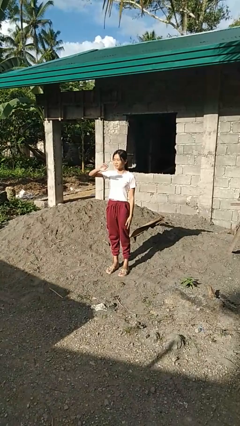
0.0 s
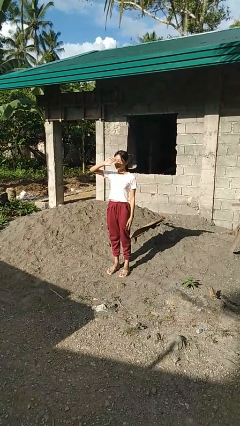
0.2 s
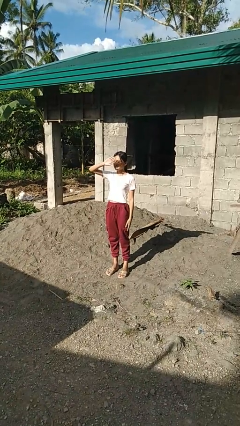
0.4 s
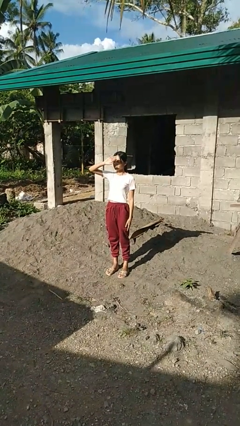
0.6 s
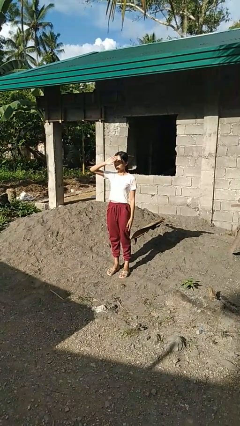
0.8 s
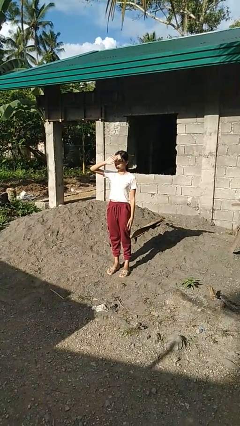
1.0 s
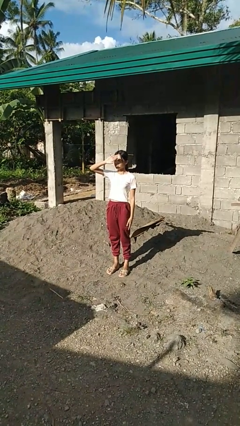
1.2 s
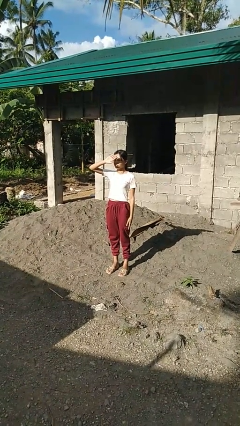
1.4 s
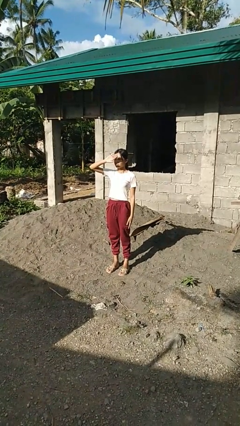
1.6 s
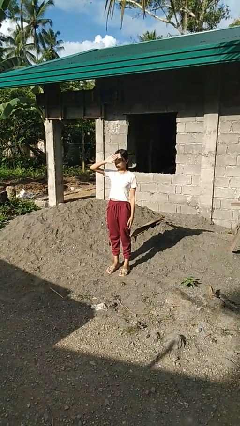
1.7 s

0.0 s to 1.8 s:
person shades eyes

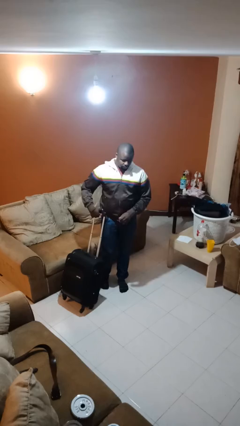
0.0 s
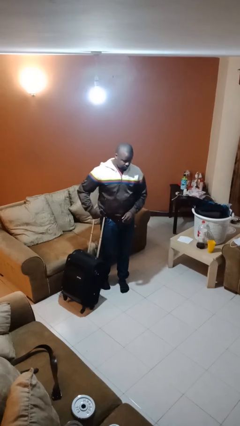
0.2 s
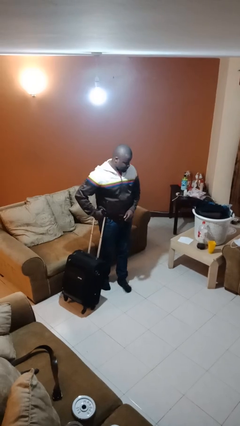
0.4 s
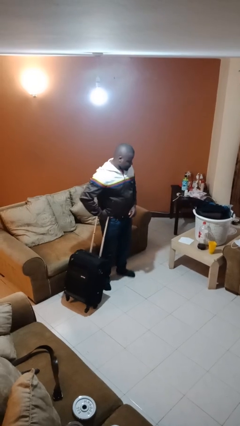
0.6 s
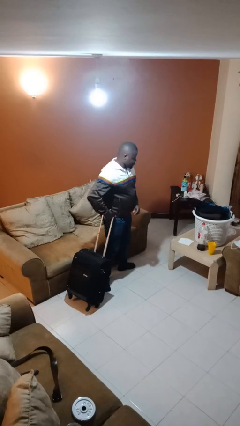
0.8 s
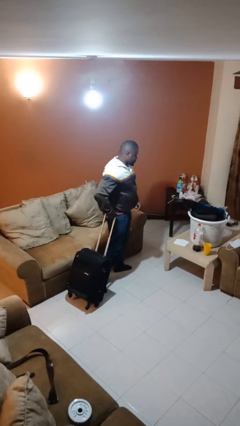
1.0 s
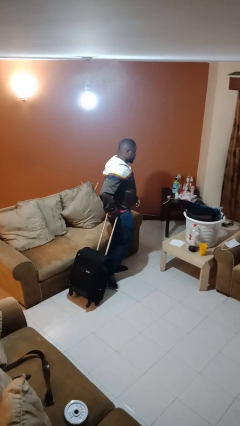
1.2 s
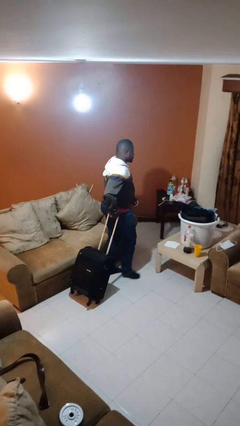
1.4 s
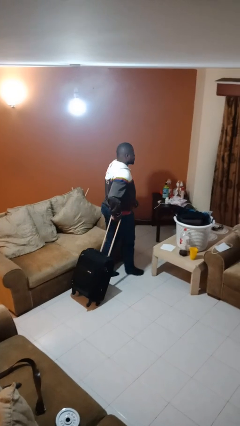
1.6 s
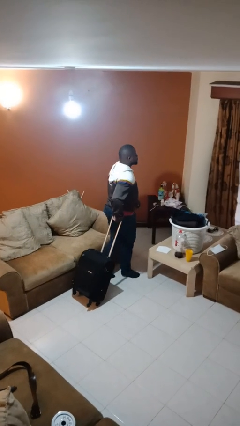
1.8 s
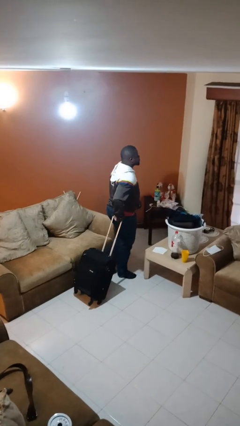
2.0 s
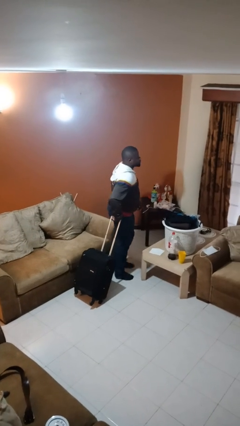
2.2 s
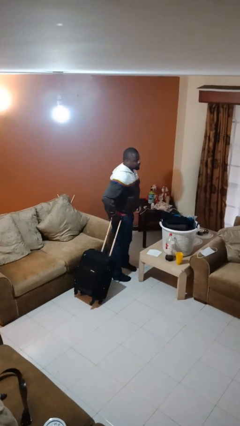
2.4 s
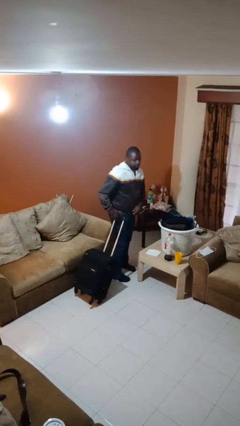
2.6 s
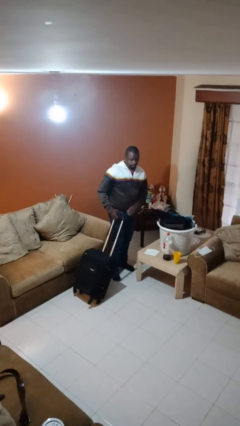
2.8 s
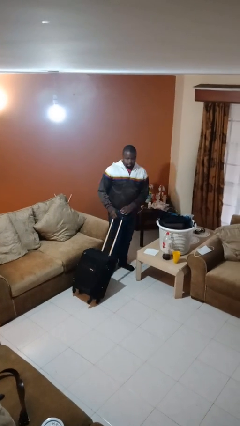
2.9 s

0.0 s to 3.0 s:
person pulls wheeled cart

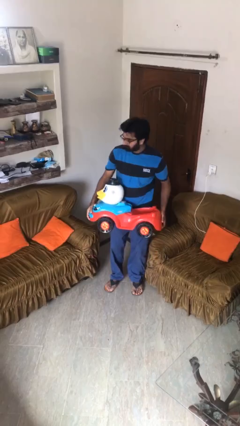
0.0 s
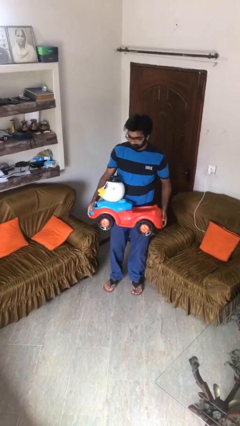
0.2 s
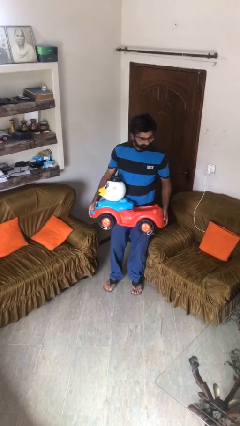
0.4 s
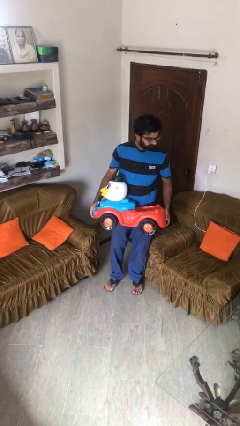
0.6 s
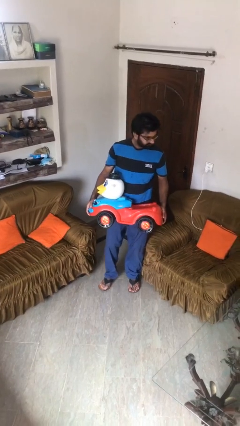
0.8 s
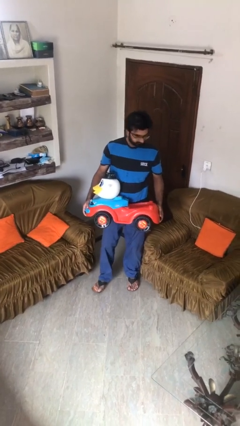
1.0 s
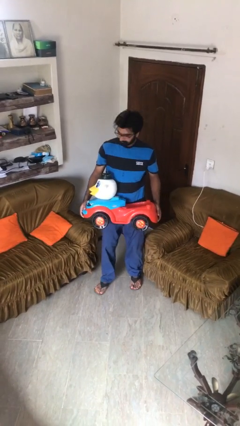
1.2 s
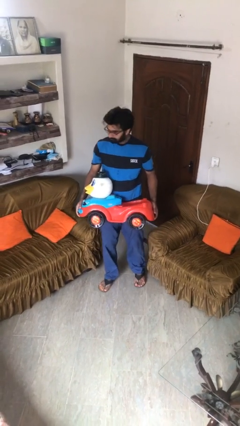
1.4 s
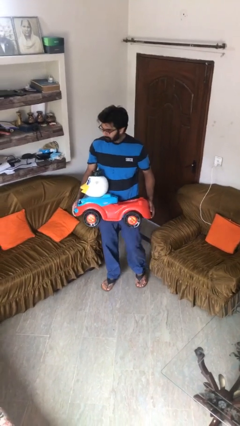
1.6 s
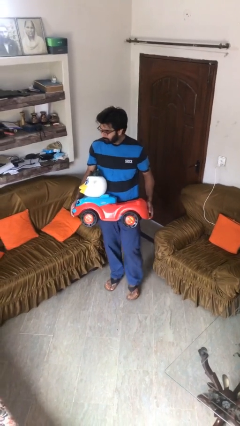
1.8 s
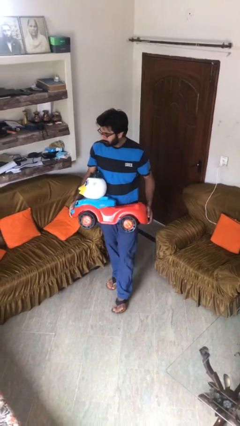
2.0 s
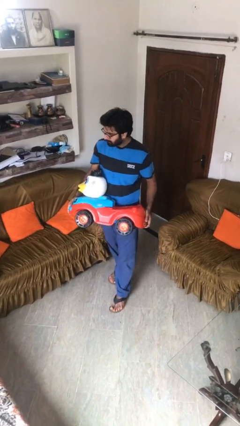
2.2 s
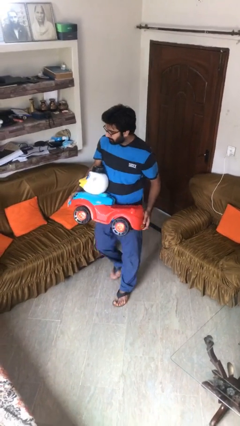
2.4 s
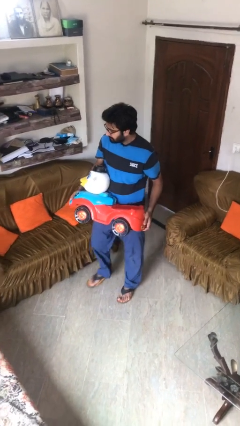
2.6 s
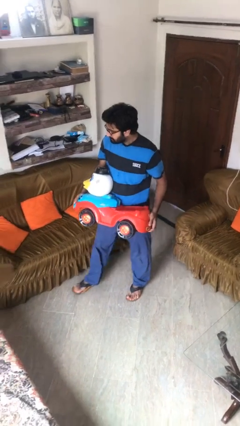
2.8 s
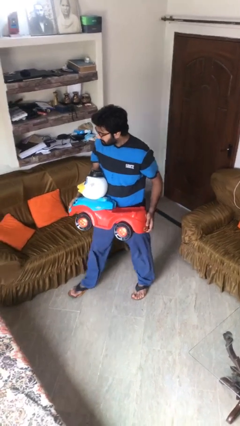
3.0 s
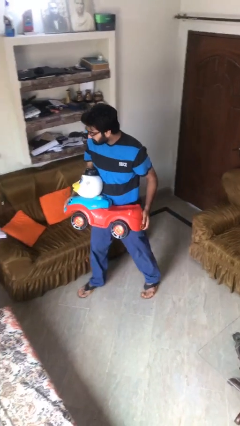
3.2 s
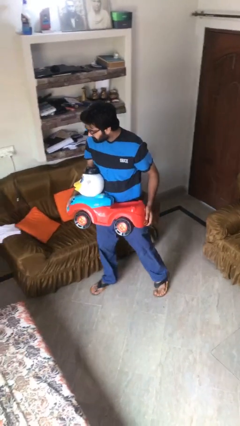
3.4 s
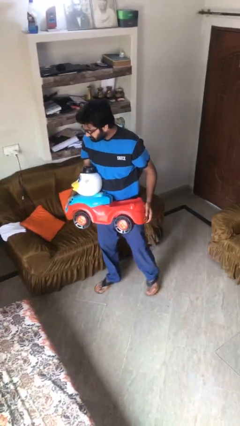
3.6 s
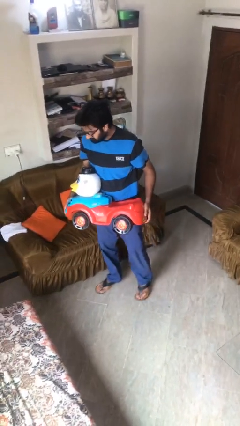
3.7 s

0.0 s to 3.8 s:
person carries heavy object

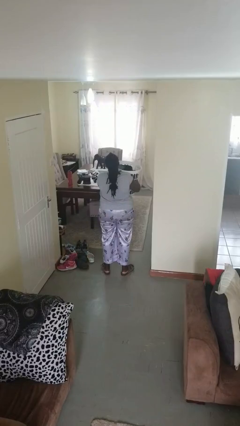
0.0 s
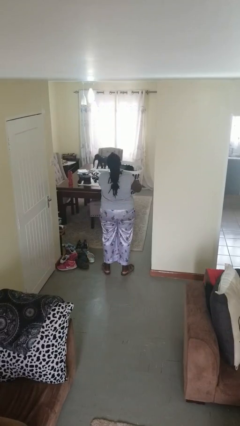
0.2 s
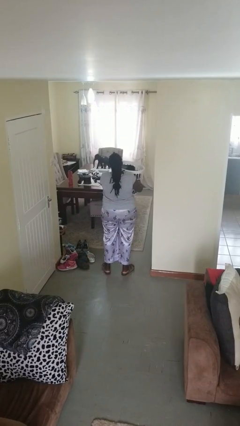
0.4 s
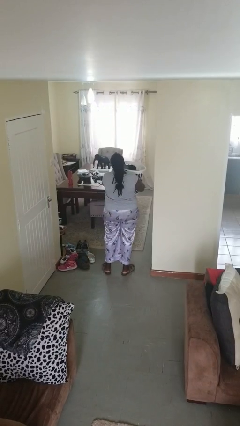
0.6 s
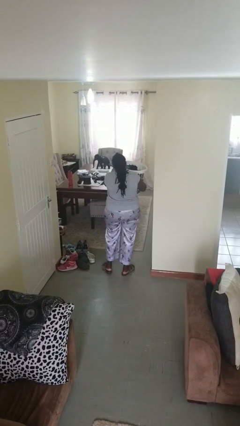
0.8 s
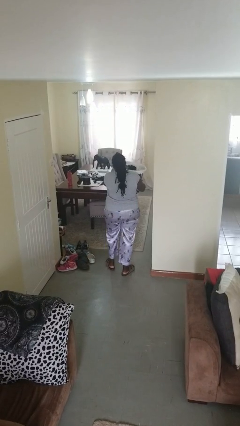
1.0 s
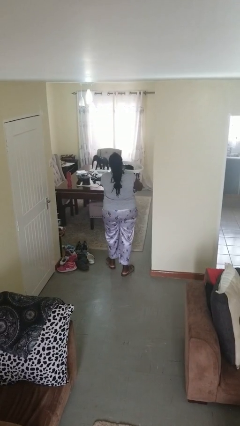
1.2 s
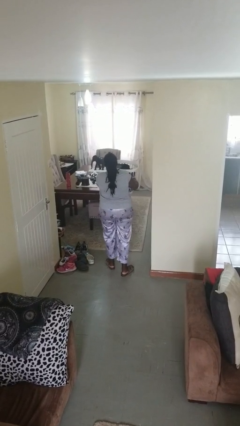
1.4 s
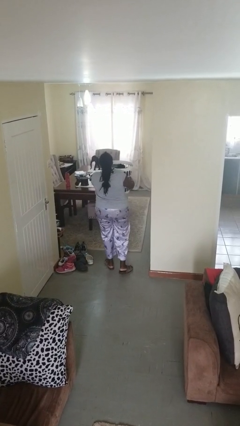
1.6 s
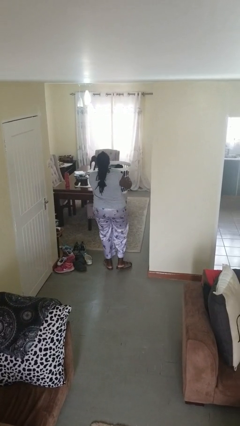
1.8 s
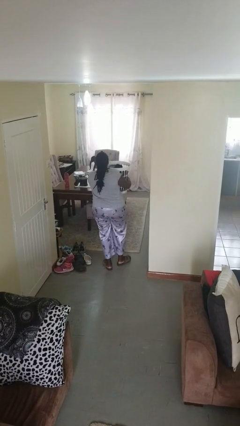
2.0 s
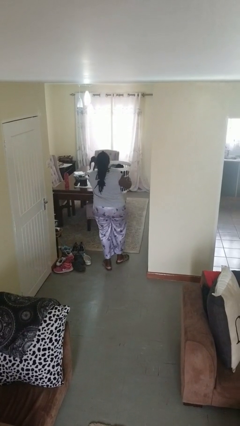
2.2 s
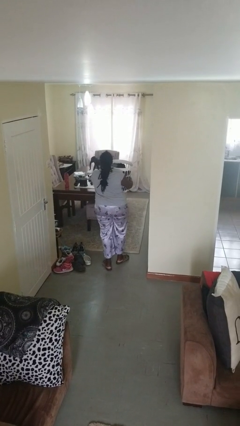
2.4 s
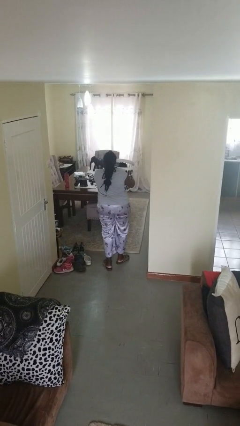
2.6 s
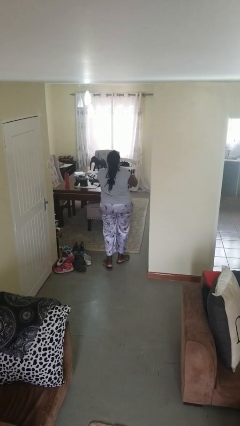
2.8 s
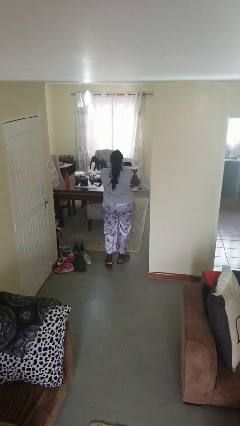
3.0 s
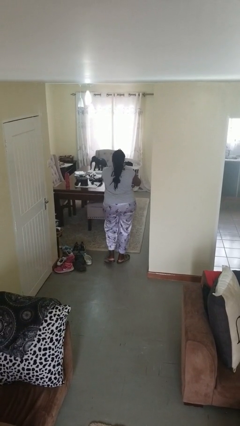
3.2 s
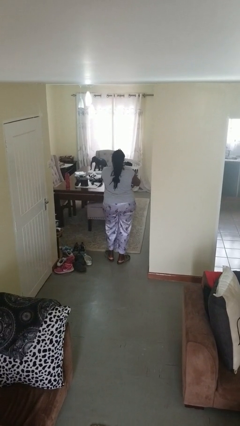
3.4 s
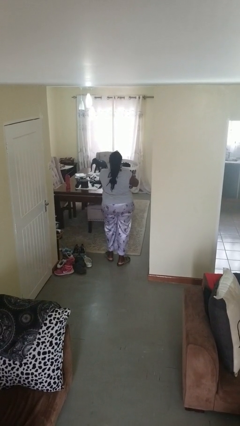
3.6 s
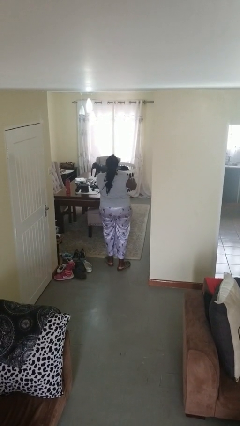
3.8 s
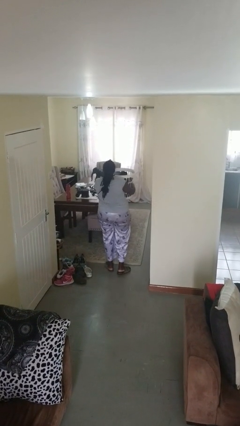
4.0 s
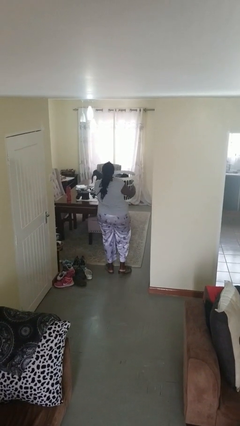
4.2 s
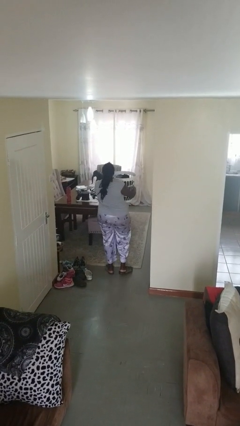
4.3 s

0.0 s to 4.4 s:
person carries laundry basket

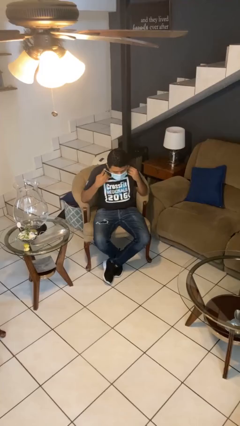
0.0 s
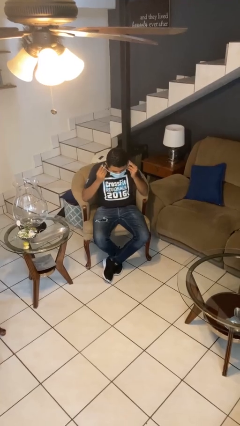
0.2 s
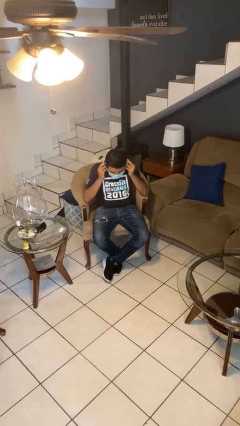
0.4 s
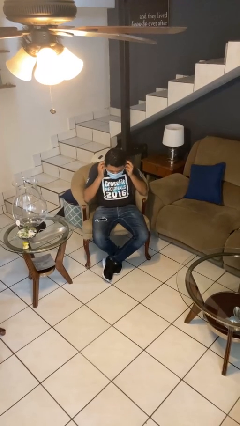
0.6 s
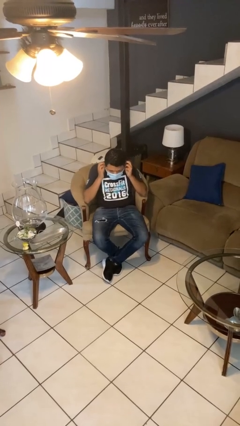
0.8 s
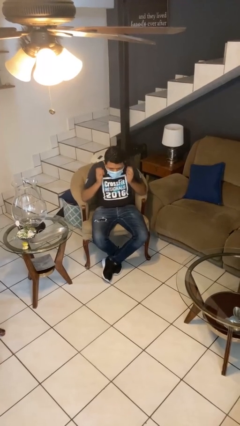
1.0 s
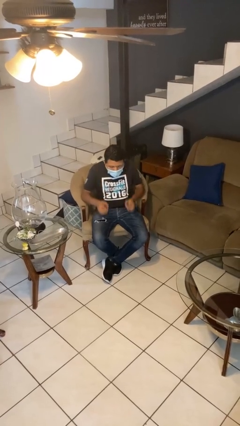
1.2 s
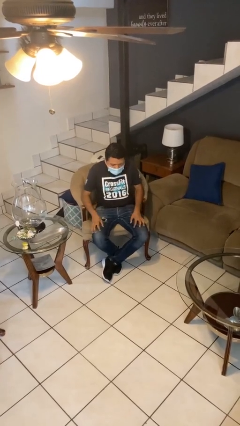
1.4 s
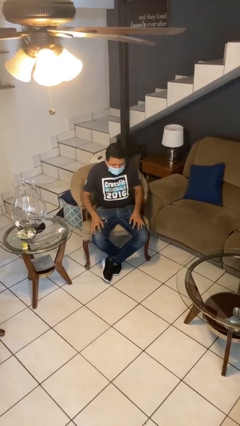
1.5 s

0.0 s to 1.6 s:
person puts on facemask

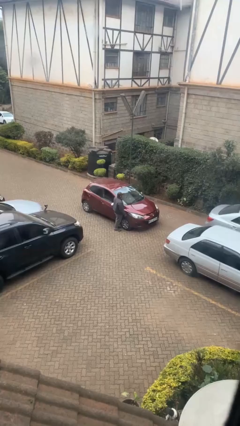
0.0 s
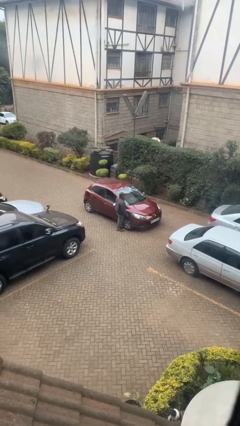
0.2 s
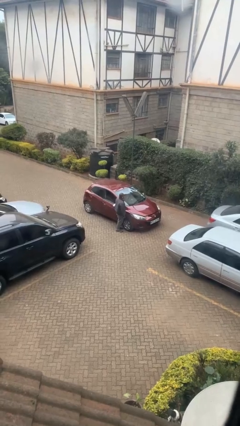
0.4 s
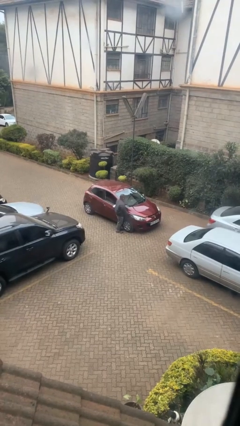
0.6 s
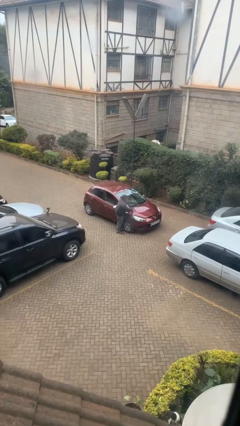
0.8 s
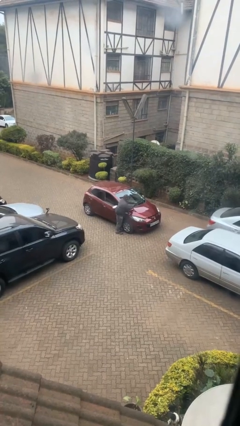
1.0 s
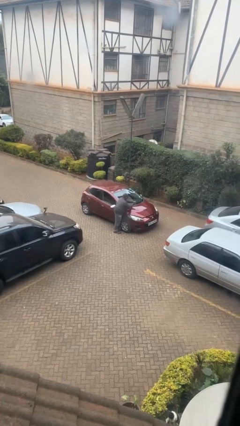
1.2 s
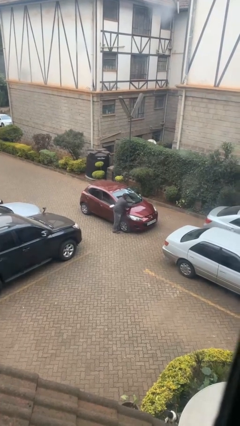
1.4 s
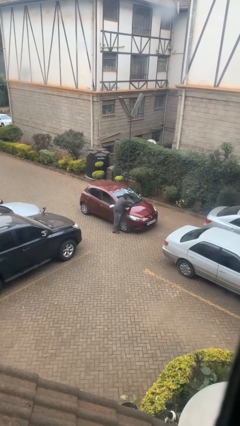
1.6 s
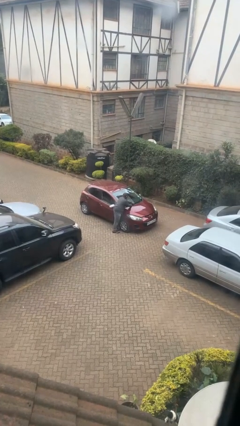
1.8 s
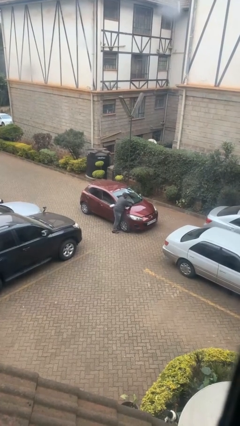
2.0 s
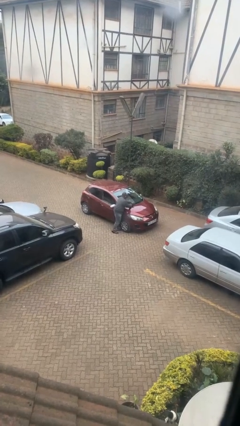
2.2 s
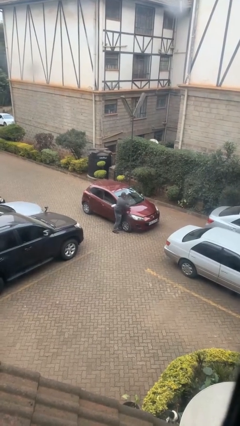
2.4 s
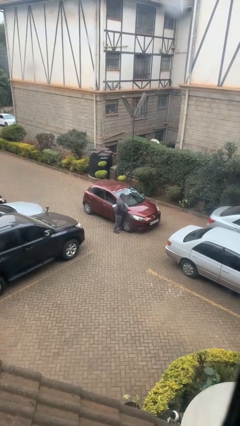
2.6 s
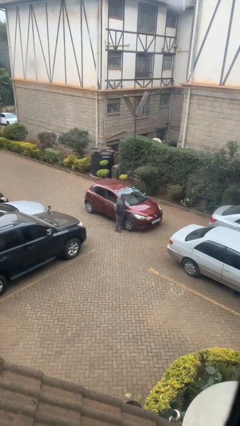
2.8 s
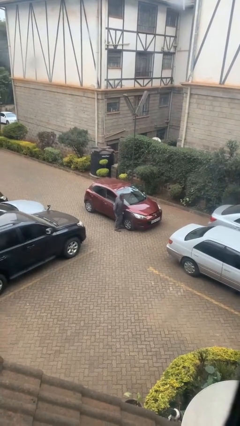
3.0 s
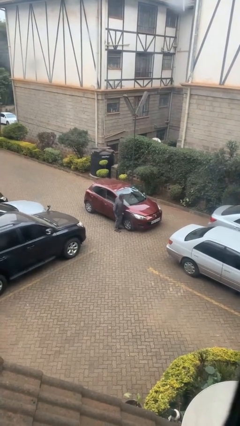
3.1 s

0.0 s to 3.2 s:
person flips down car wipers
